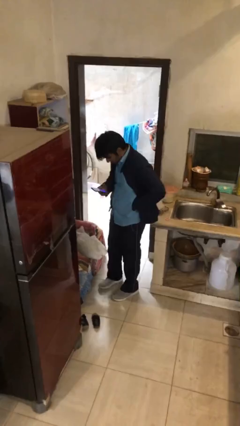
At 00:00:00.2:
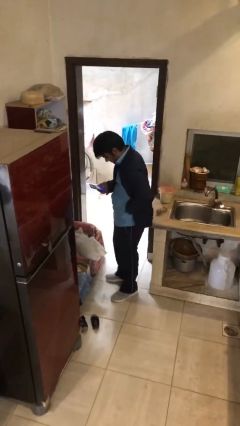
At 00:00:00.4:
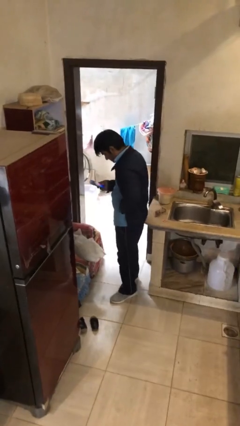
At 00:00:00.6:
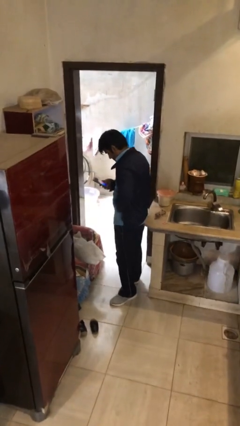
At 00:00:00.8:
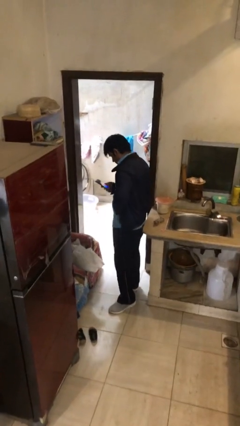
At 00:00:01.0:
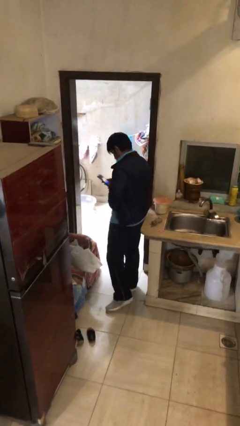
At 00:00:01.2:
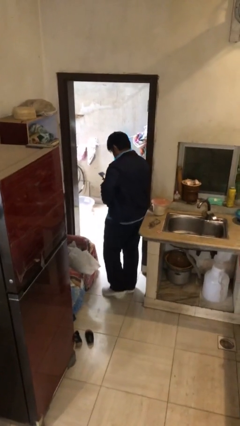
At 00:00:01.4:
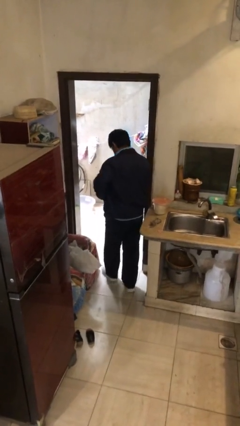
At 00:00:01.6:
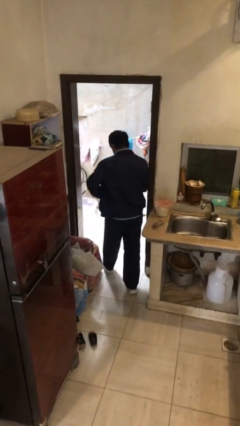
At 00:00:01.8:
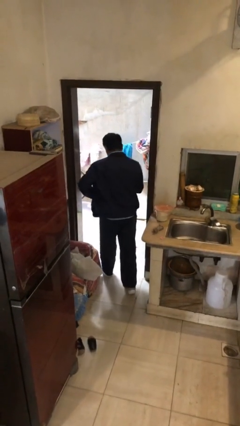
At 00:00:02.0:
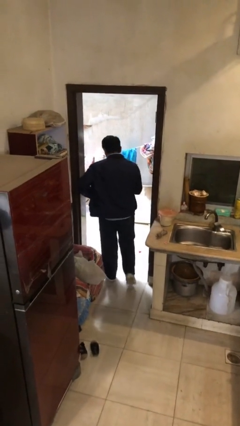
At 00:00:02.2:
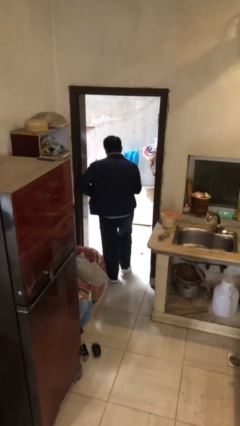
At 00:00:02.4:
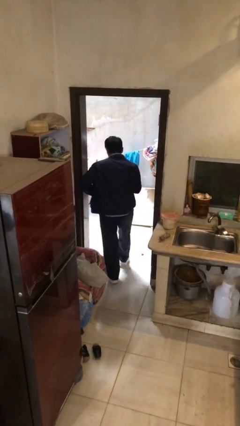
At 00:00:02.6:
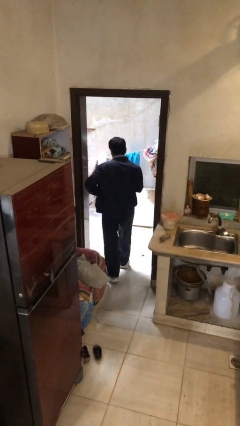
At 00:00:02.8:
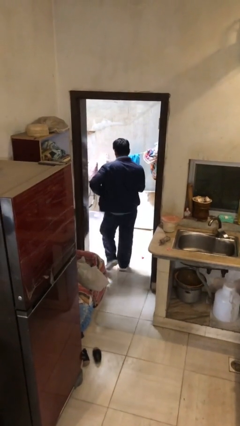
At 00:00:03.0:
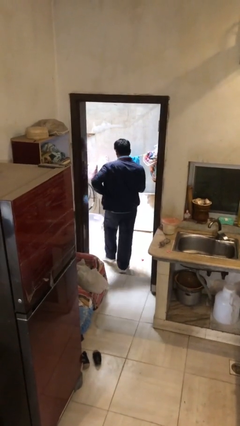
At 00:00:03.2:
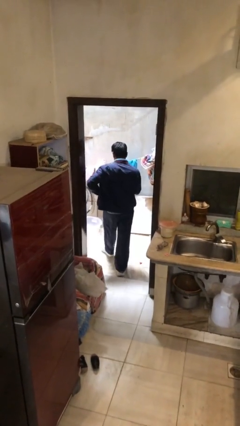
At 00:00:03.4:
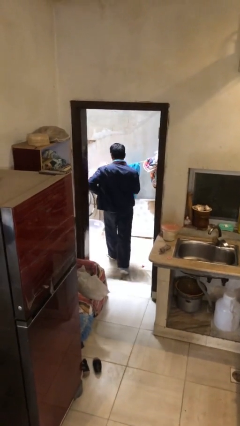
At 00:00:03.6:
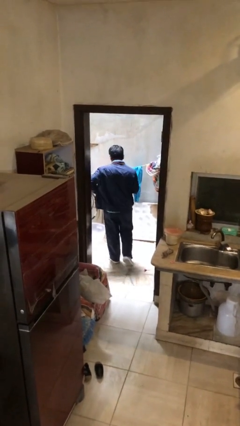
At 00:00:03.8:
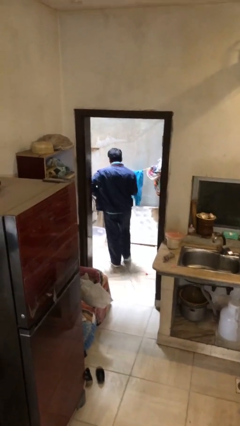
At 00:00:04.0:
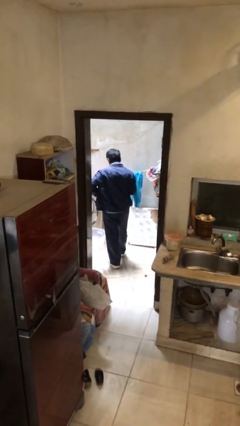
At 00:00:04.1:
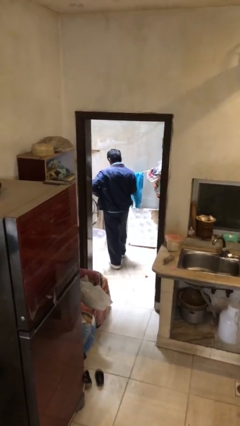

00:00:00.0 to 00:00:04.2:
person exits scene through structure

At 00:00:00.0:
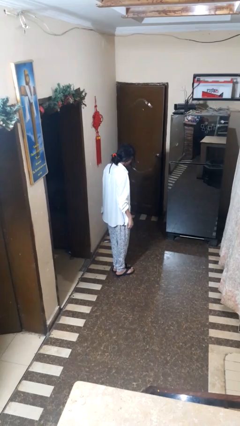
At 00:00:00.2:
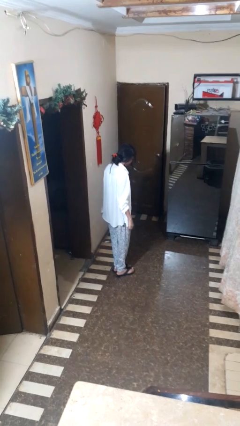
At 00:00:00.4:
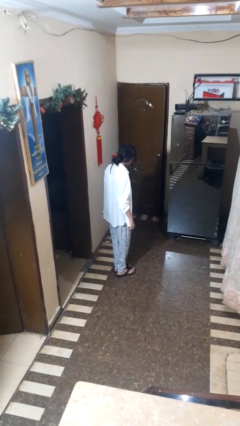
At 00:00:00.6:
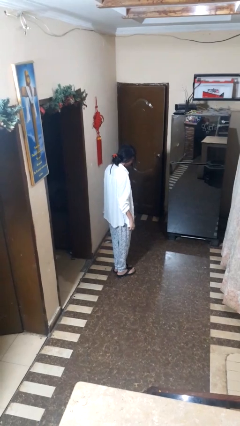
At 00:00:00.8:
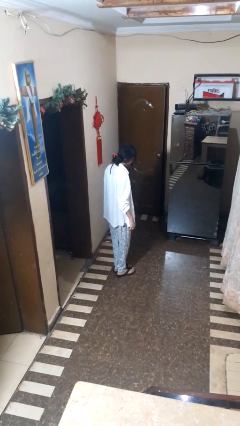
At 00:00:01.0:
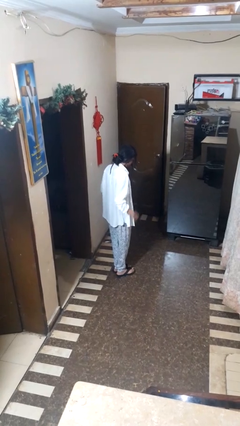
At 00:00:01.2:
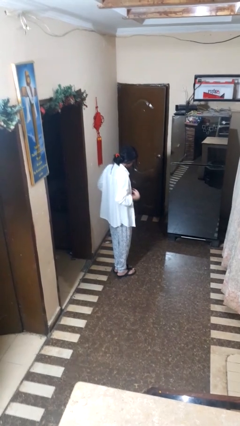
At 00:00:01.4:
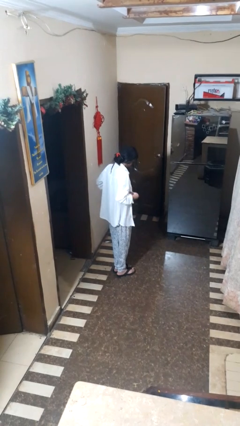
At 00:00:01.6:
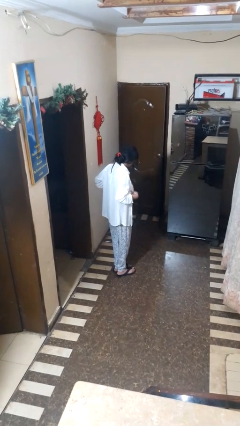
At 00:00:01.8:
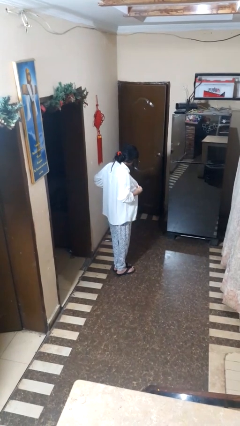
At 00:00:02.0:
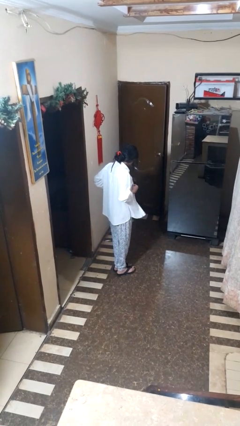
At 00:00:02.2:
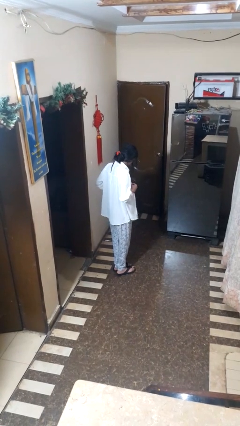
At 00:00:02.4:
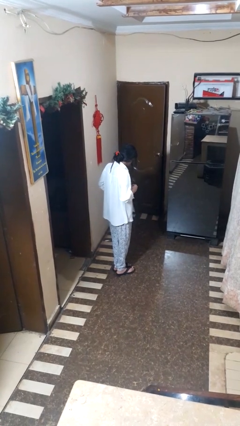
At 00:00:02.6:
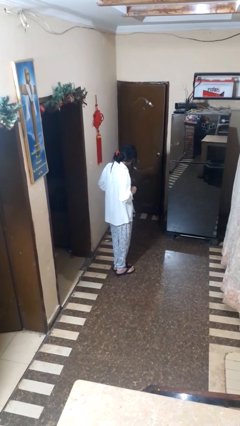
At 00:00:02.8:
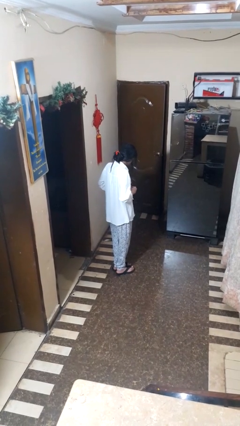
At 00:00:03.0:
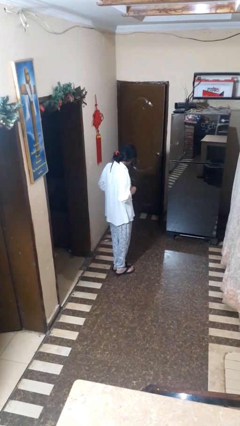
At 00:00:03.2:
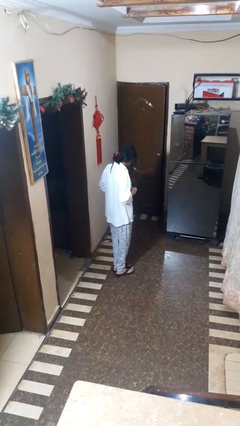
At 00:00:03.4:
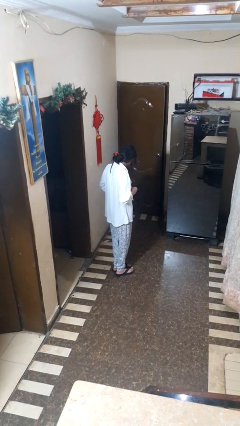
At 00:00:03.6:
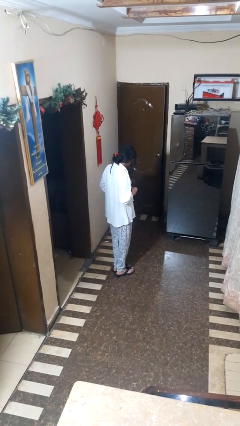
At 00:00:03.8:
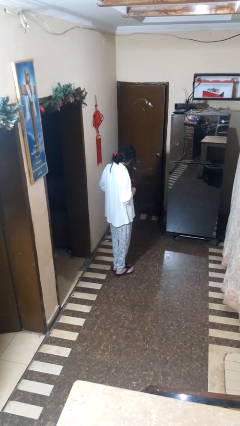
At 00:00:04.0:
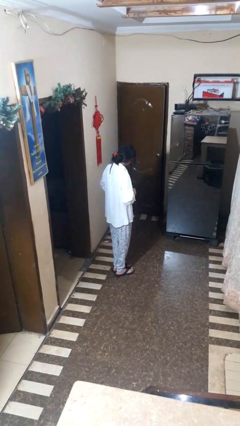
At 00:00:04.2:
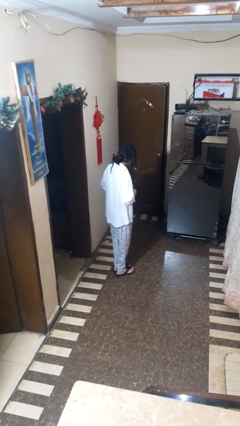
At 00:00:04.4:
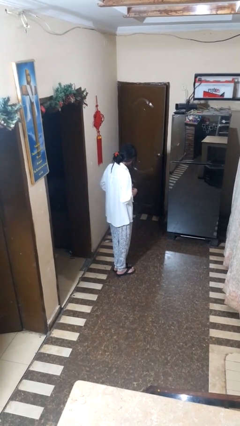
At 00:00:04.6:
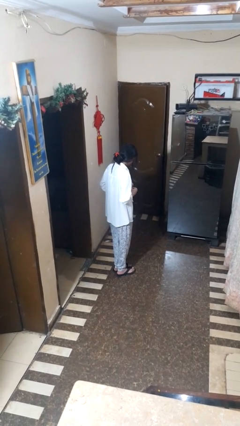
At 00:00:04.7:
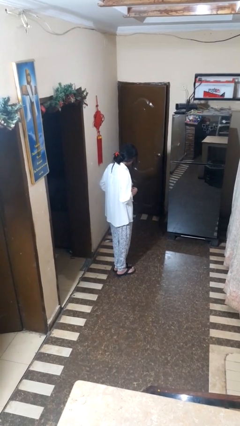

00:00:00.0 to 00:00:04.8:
person buttons shirt

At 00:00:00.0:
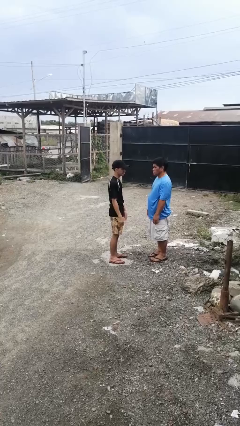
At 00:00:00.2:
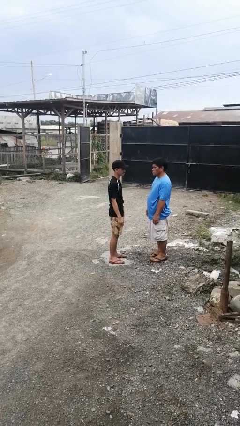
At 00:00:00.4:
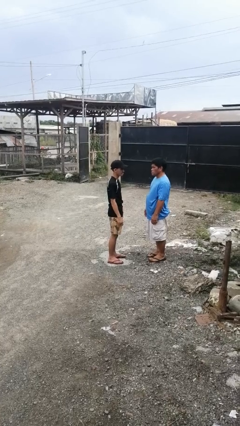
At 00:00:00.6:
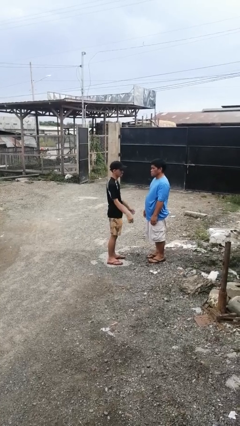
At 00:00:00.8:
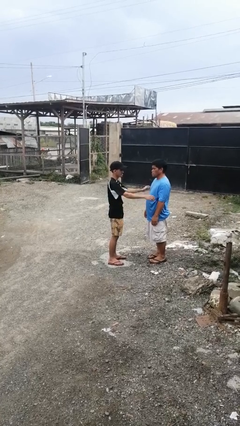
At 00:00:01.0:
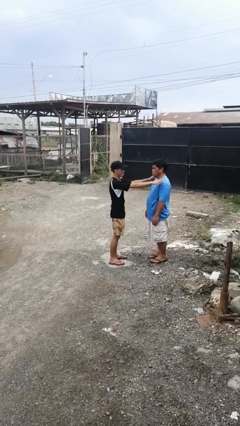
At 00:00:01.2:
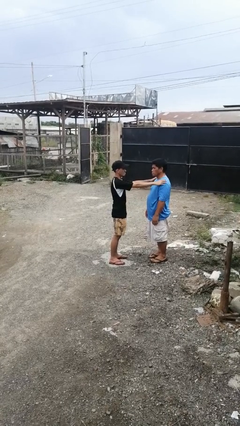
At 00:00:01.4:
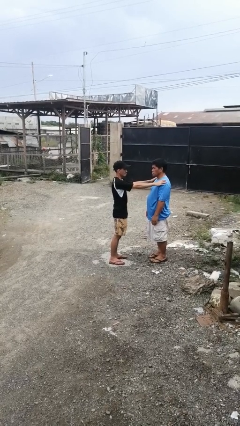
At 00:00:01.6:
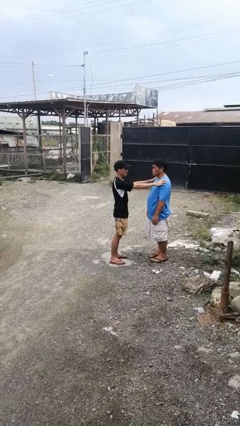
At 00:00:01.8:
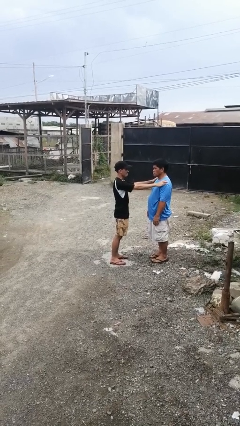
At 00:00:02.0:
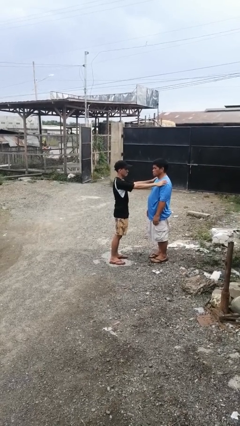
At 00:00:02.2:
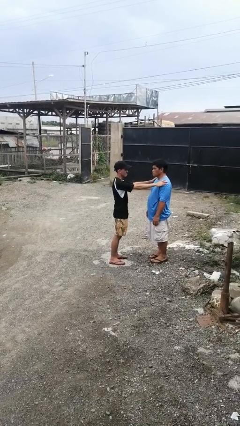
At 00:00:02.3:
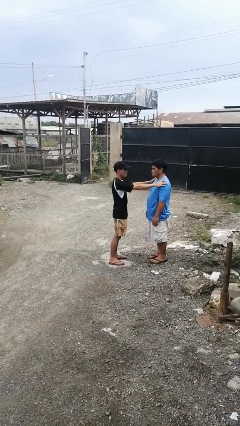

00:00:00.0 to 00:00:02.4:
person grabs person by shoulder

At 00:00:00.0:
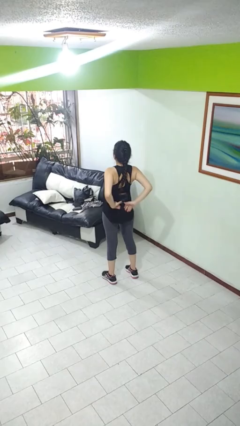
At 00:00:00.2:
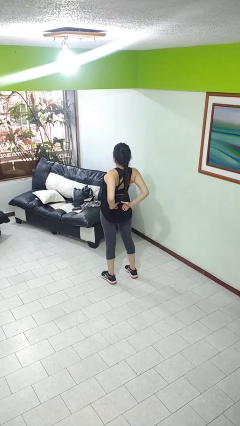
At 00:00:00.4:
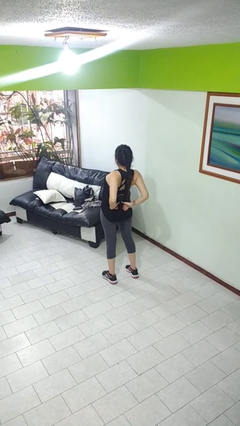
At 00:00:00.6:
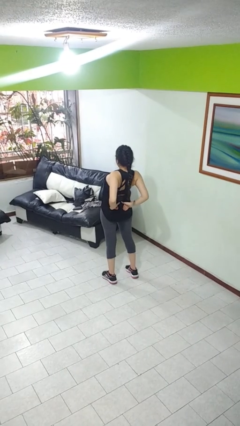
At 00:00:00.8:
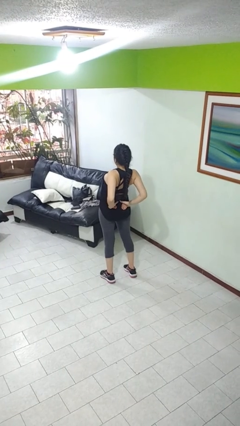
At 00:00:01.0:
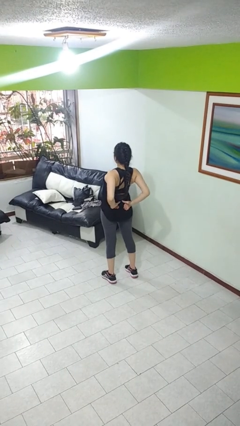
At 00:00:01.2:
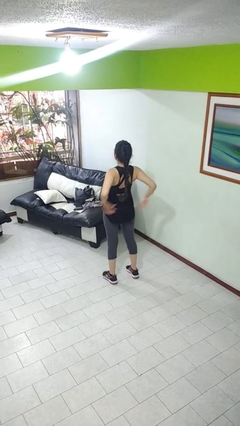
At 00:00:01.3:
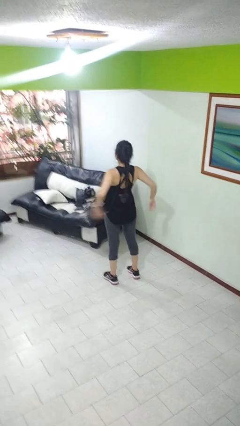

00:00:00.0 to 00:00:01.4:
person stretches back

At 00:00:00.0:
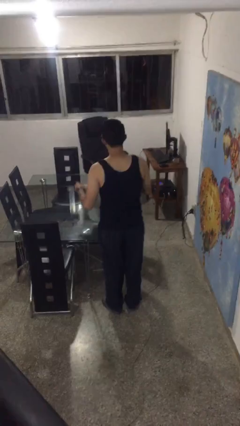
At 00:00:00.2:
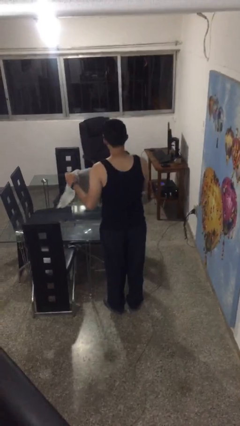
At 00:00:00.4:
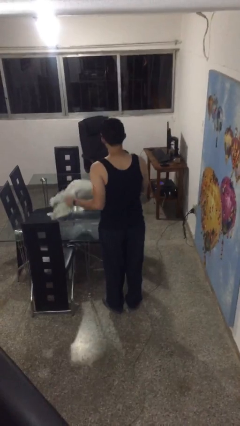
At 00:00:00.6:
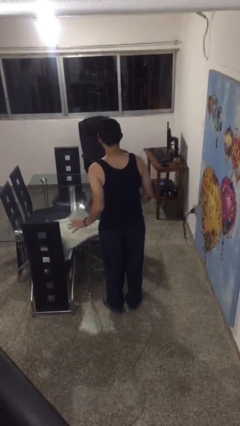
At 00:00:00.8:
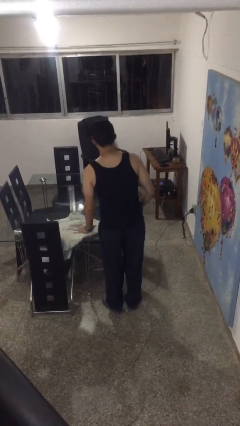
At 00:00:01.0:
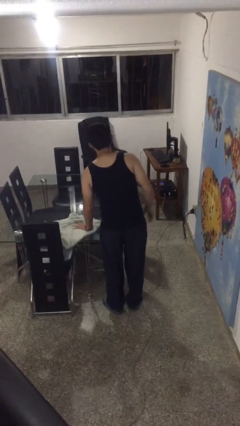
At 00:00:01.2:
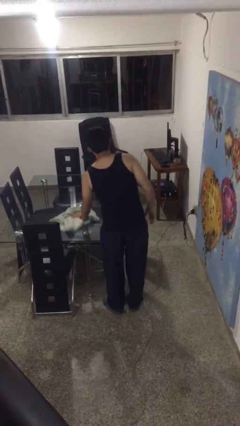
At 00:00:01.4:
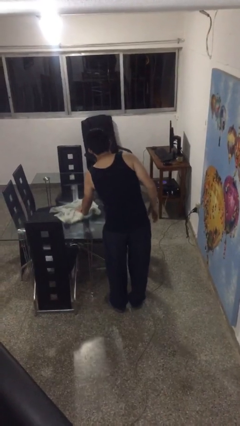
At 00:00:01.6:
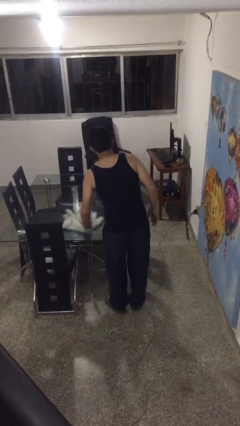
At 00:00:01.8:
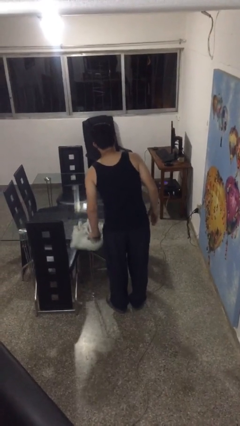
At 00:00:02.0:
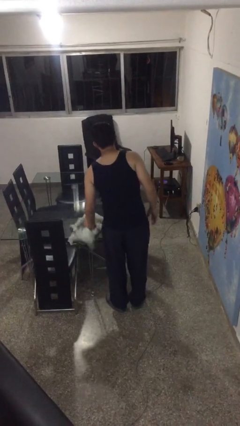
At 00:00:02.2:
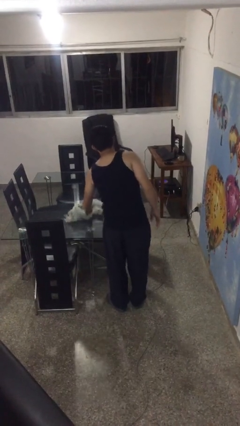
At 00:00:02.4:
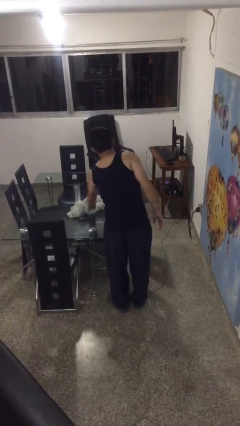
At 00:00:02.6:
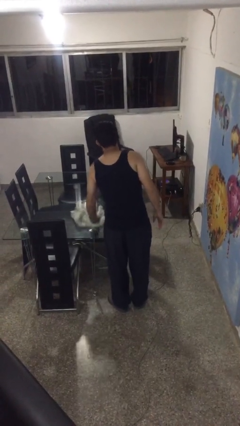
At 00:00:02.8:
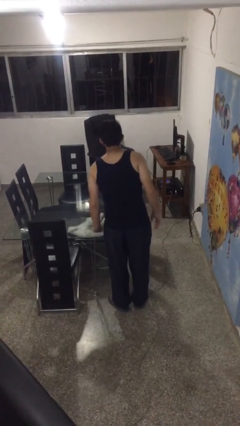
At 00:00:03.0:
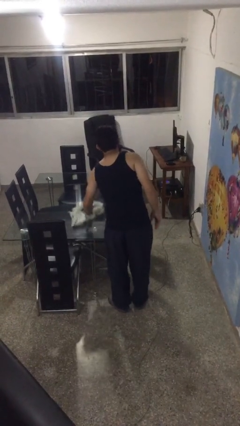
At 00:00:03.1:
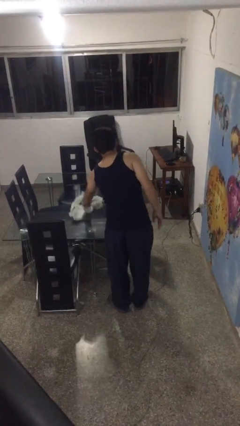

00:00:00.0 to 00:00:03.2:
person cleans table with rag

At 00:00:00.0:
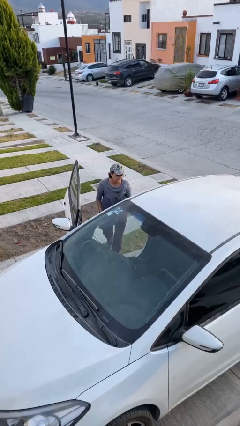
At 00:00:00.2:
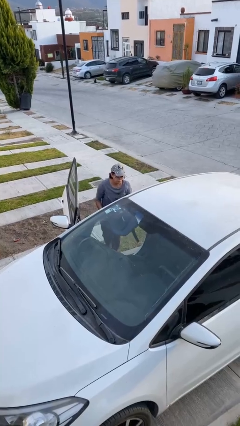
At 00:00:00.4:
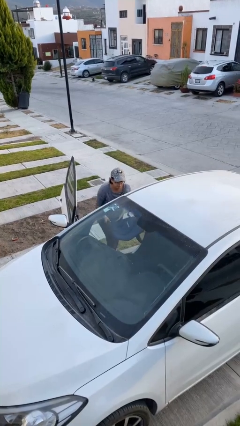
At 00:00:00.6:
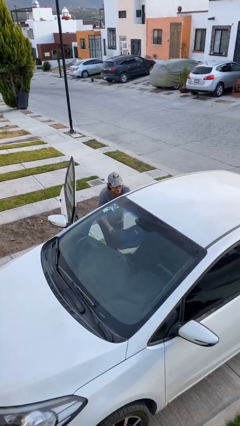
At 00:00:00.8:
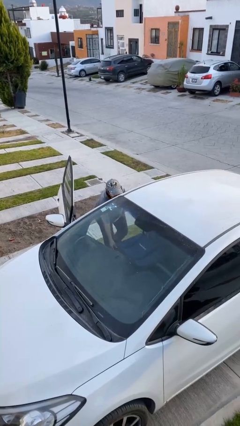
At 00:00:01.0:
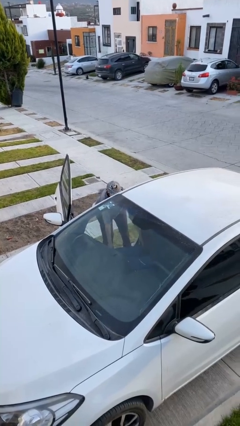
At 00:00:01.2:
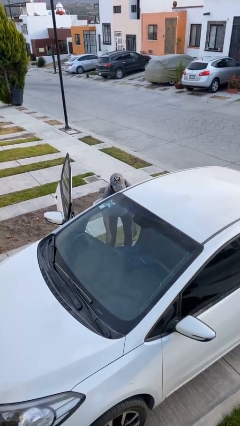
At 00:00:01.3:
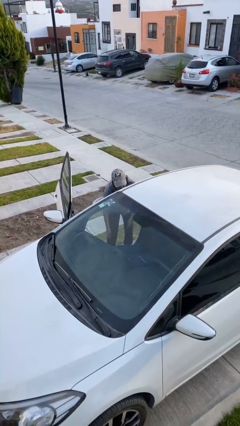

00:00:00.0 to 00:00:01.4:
person loads car
